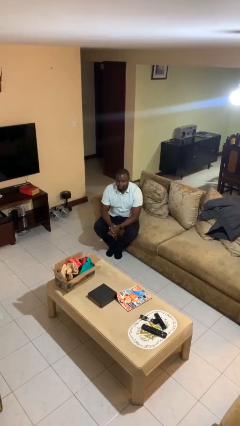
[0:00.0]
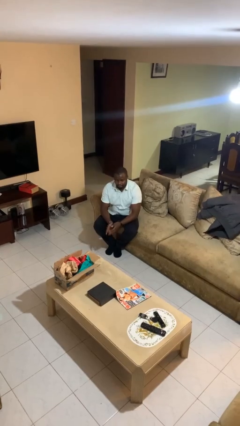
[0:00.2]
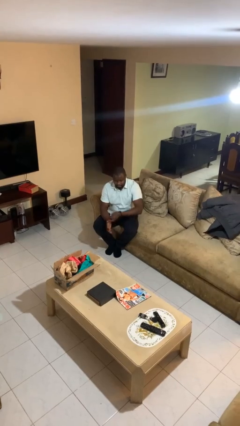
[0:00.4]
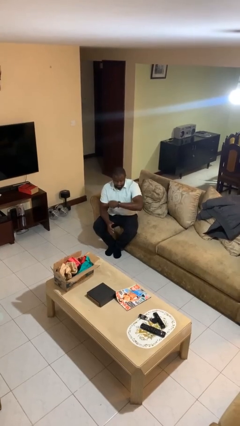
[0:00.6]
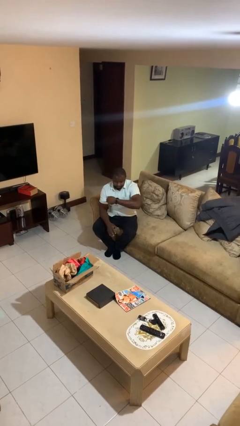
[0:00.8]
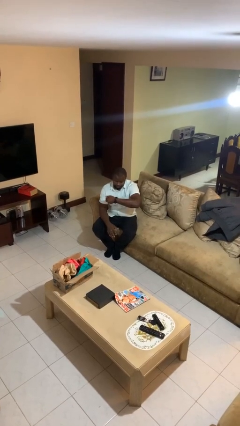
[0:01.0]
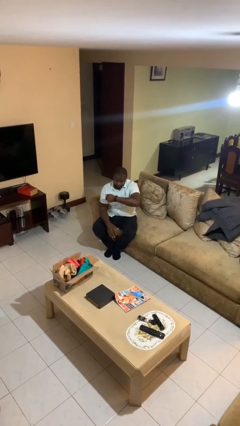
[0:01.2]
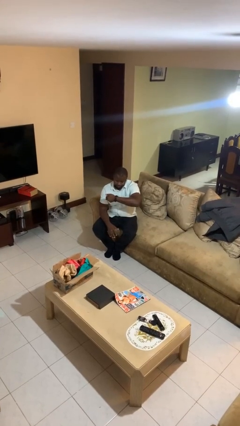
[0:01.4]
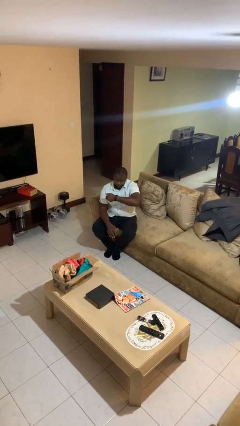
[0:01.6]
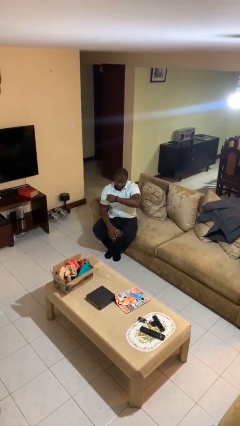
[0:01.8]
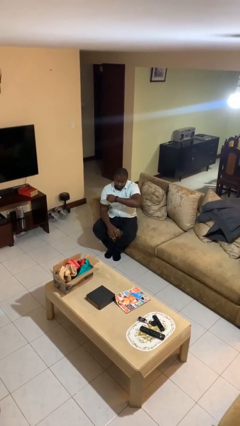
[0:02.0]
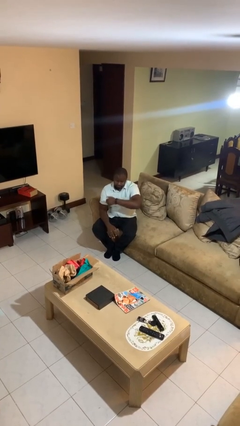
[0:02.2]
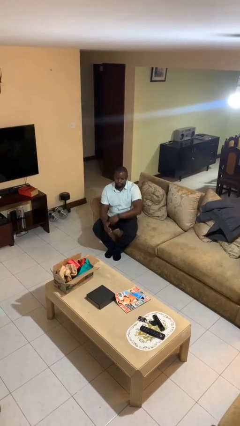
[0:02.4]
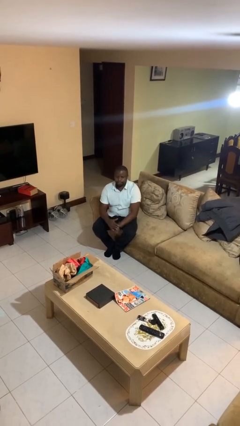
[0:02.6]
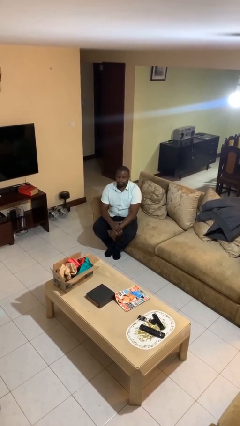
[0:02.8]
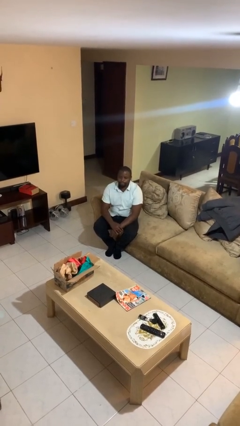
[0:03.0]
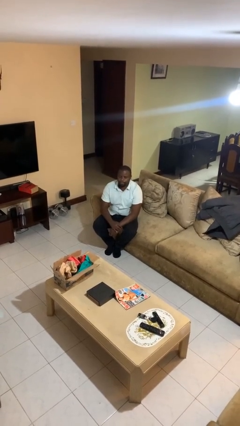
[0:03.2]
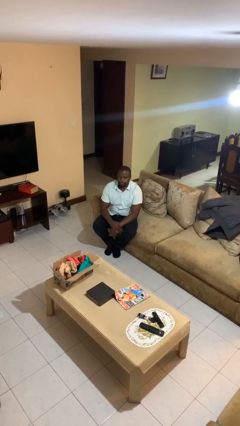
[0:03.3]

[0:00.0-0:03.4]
person looks at wristwatch

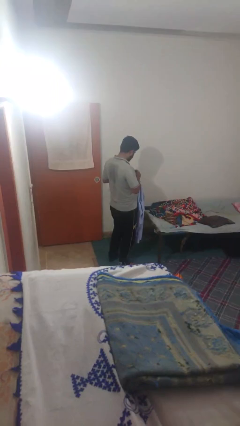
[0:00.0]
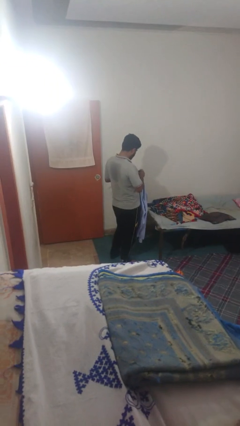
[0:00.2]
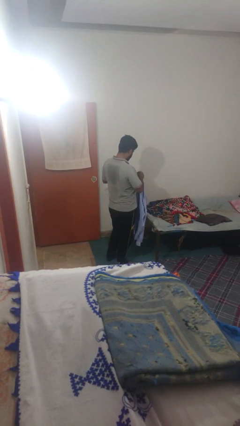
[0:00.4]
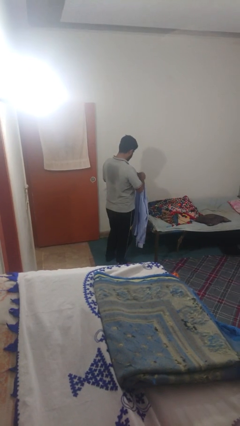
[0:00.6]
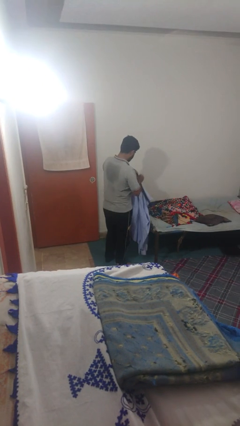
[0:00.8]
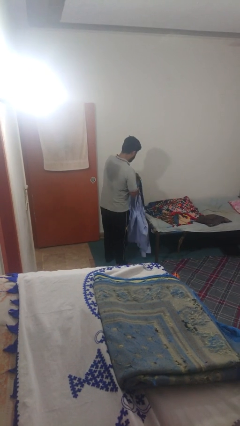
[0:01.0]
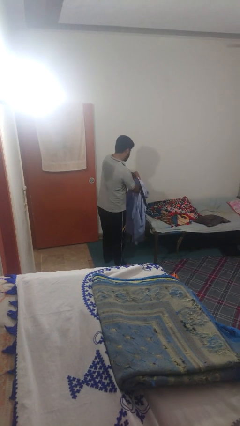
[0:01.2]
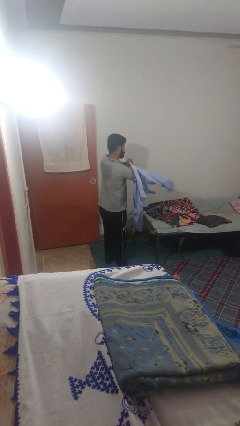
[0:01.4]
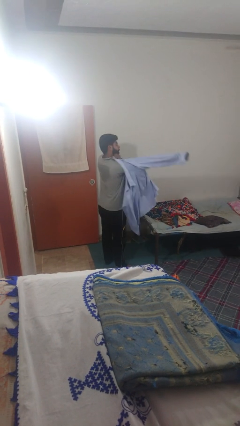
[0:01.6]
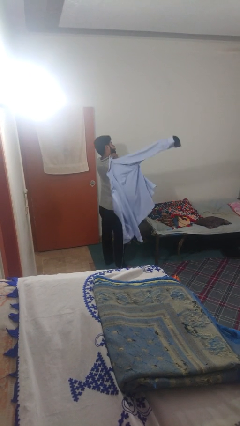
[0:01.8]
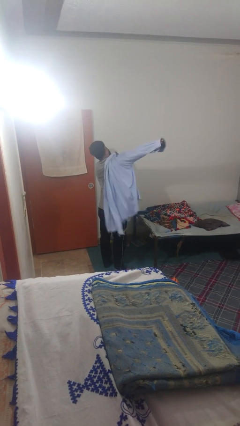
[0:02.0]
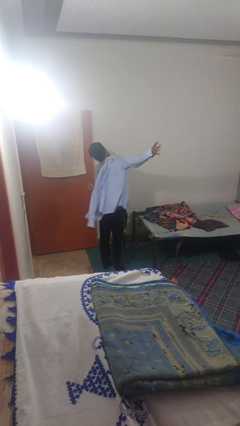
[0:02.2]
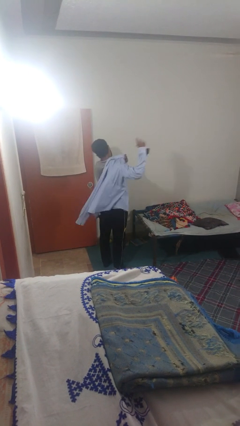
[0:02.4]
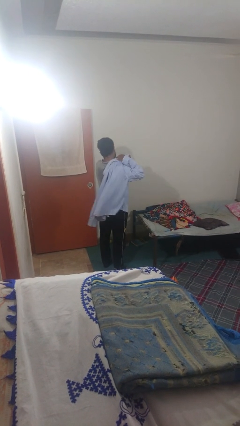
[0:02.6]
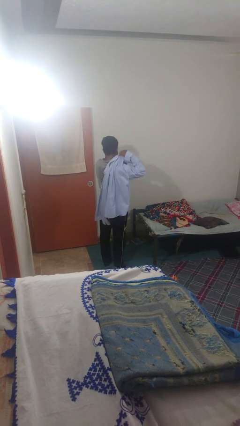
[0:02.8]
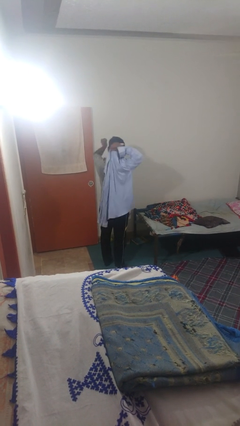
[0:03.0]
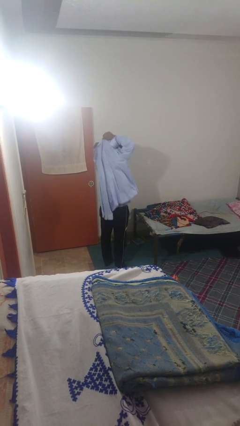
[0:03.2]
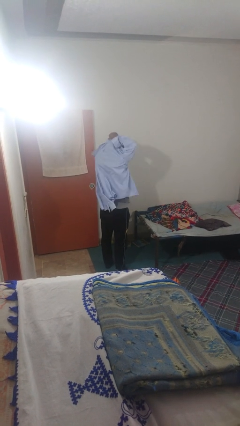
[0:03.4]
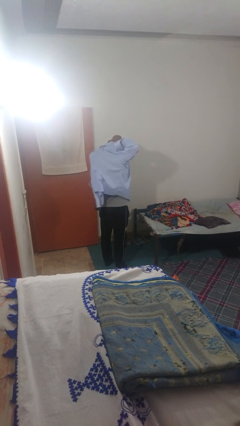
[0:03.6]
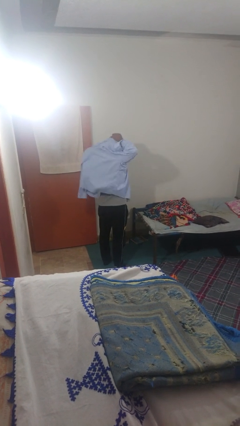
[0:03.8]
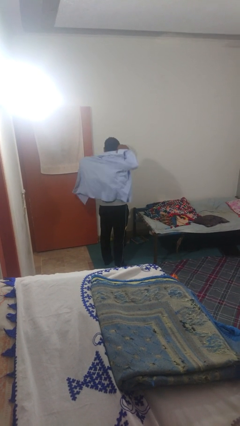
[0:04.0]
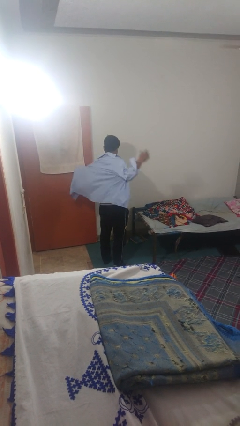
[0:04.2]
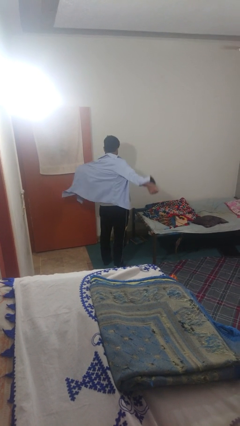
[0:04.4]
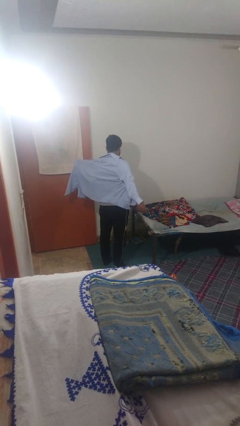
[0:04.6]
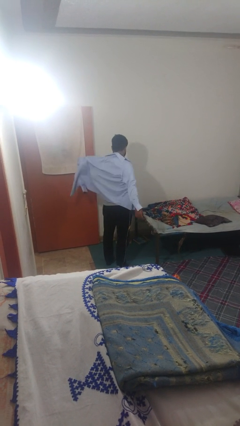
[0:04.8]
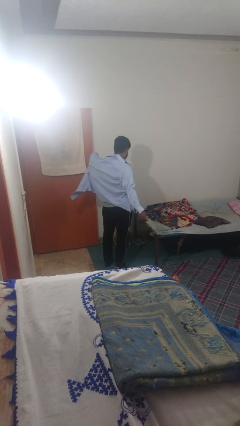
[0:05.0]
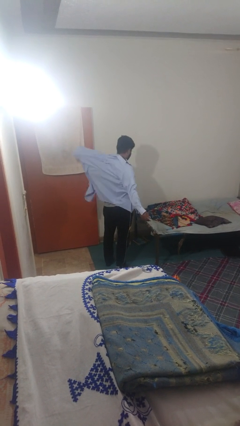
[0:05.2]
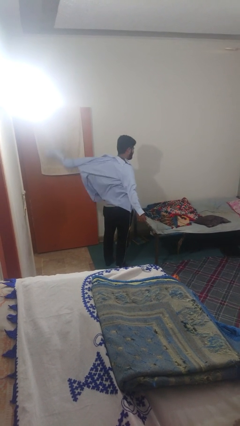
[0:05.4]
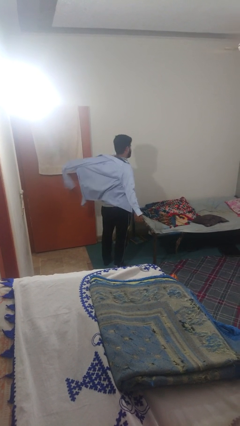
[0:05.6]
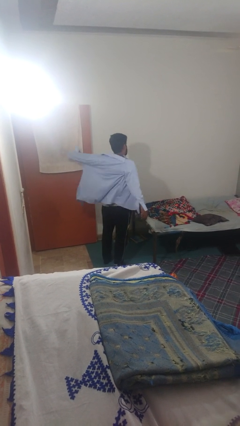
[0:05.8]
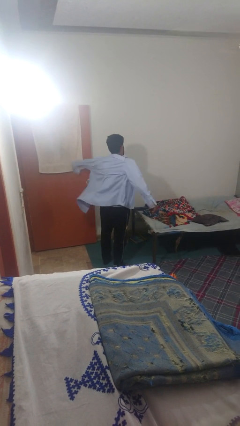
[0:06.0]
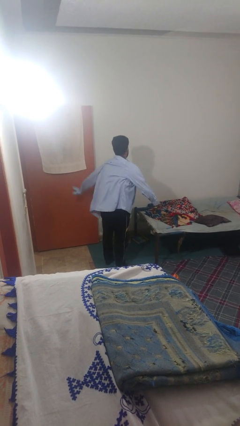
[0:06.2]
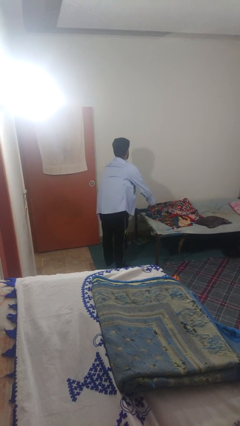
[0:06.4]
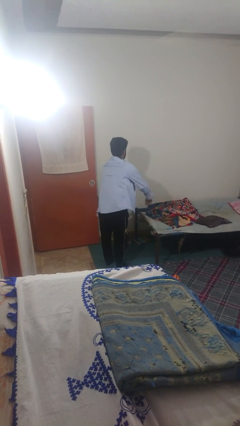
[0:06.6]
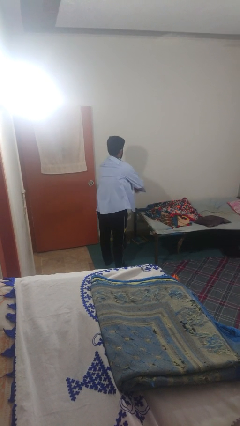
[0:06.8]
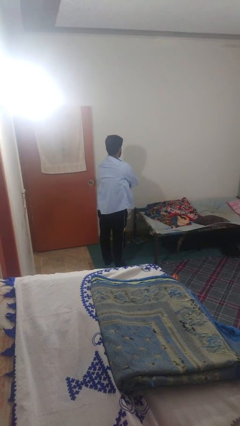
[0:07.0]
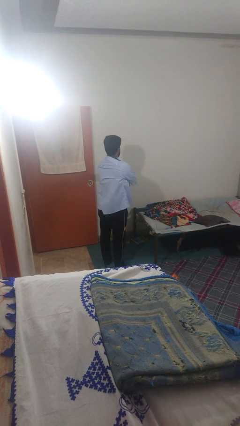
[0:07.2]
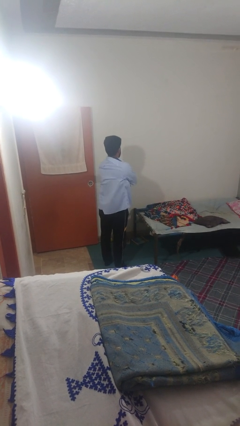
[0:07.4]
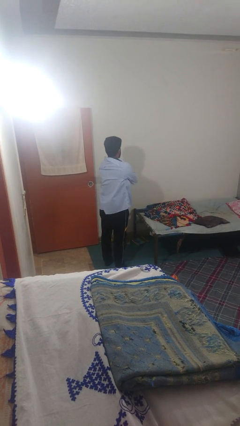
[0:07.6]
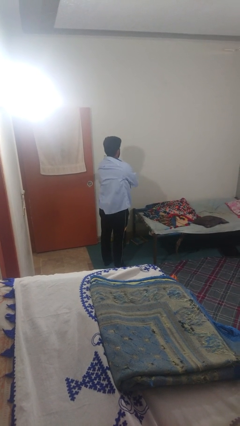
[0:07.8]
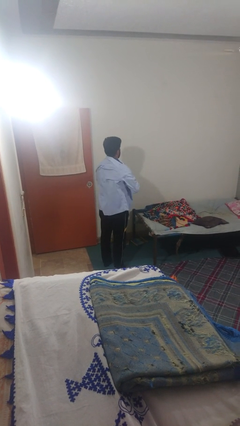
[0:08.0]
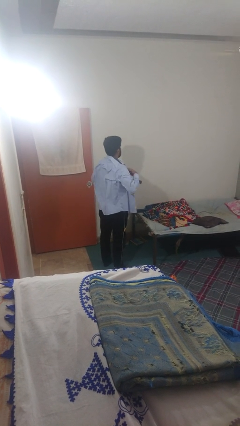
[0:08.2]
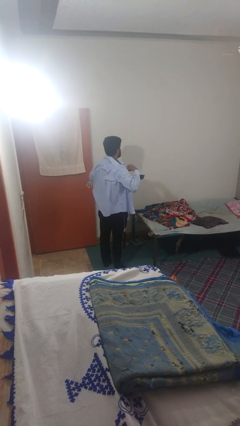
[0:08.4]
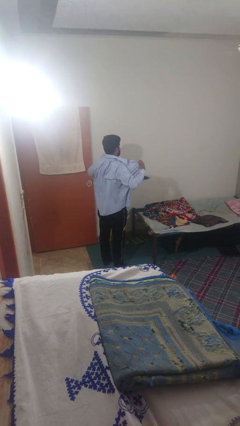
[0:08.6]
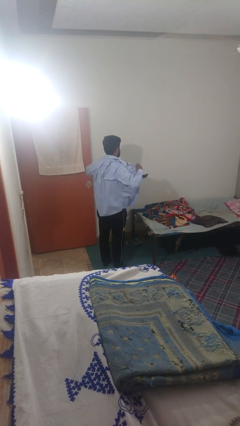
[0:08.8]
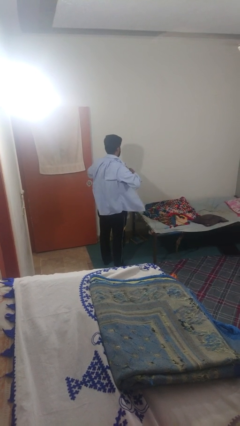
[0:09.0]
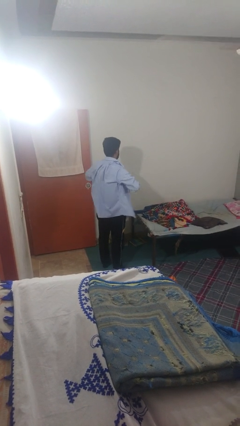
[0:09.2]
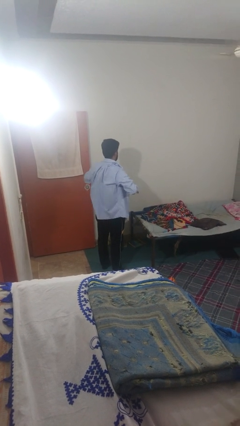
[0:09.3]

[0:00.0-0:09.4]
person puts on shirt

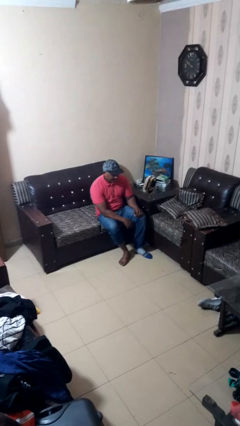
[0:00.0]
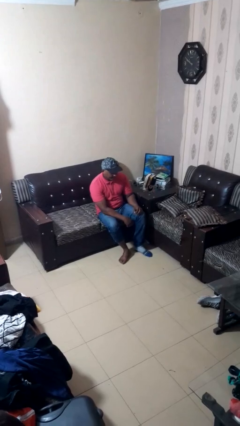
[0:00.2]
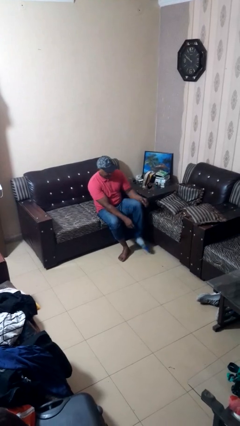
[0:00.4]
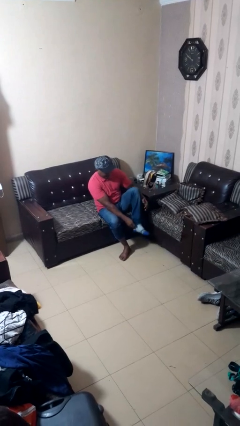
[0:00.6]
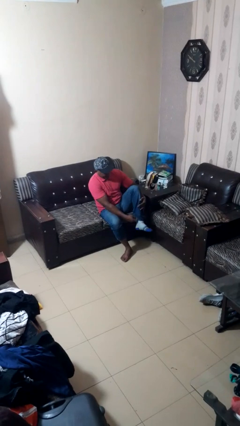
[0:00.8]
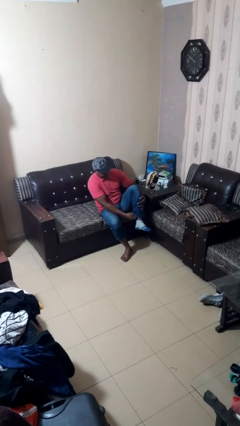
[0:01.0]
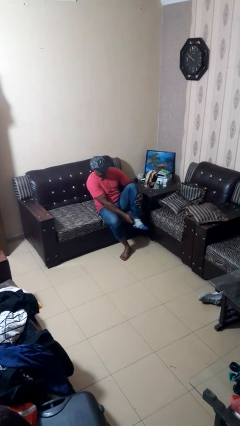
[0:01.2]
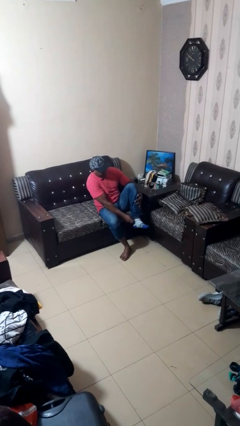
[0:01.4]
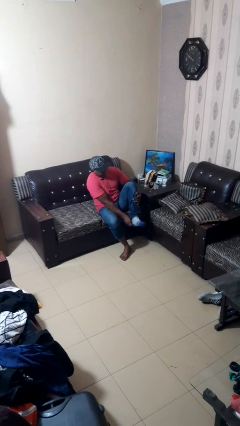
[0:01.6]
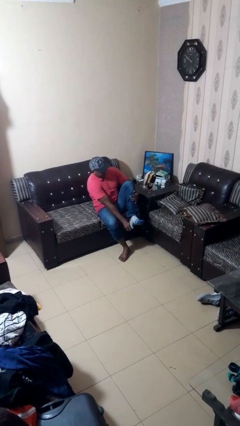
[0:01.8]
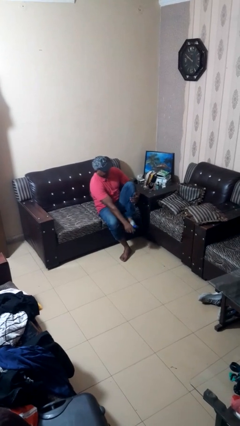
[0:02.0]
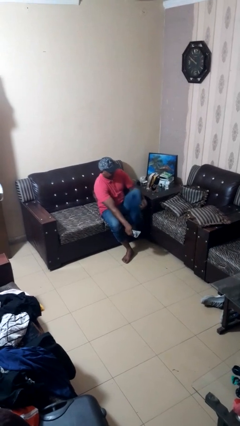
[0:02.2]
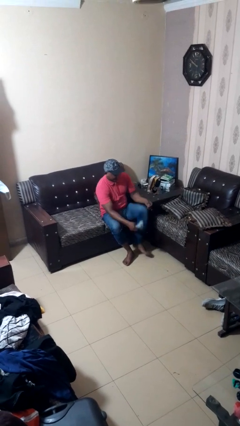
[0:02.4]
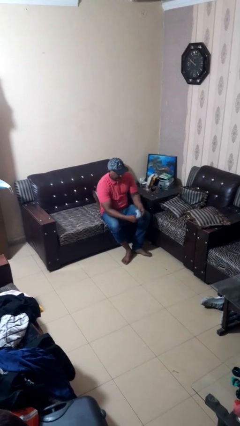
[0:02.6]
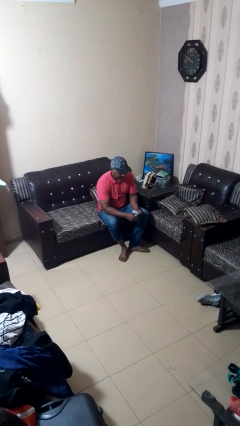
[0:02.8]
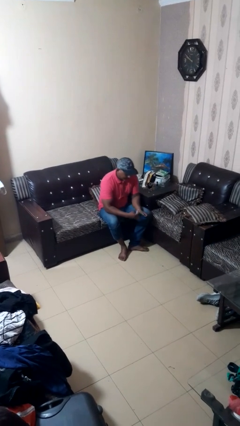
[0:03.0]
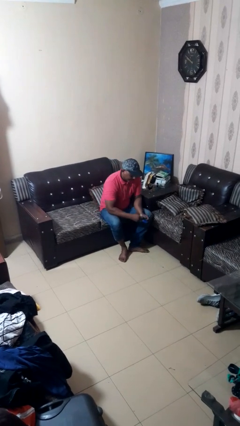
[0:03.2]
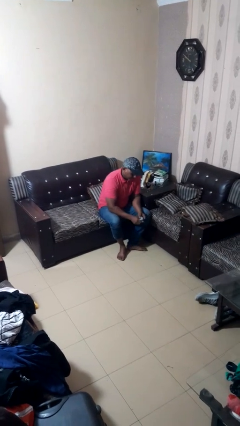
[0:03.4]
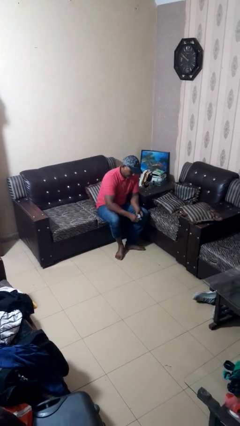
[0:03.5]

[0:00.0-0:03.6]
person takes off socks

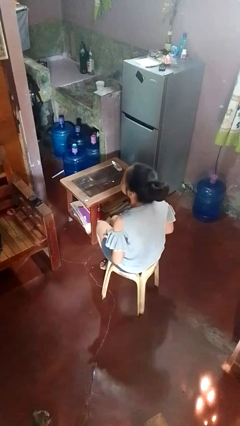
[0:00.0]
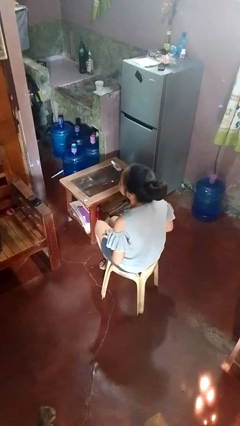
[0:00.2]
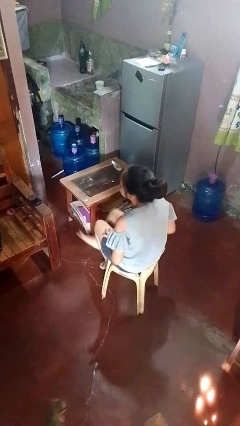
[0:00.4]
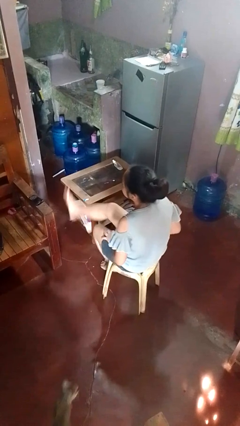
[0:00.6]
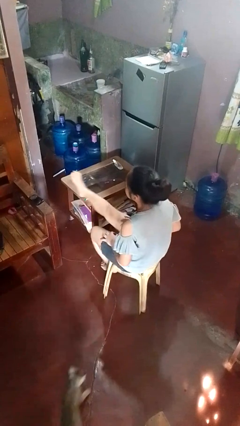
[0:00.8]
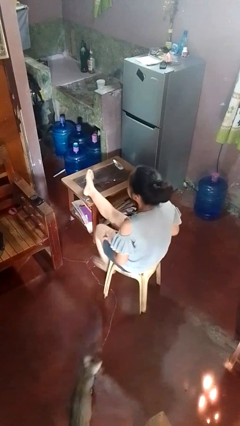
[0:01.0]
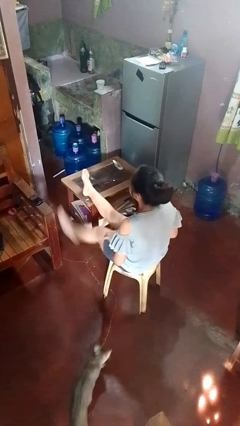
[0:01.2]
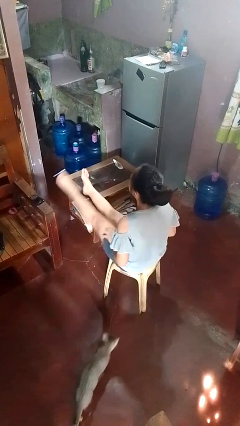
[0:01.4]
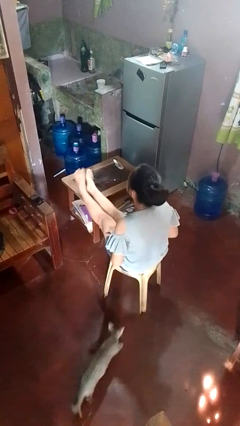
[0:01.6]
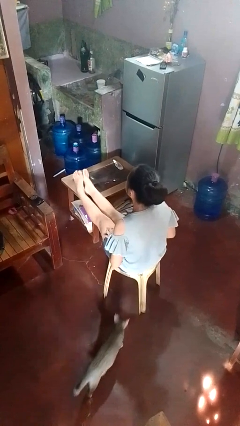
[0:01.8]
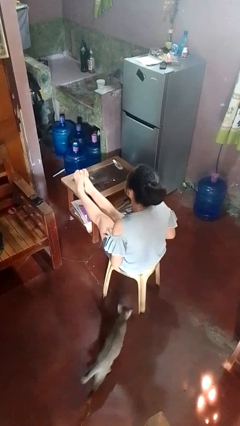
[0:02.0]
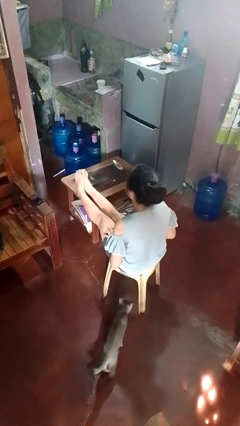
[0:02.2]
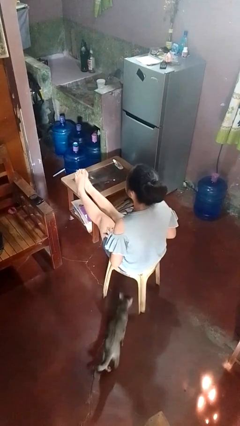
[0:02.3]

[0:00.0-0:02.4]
person puts feet up
